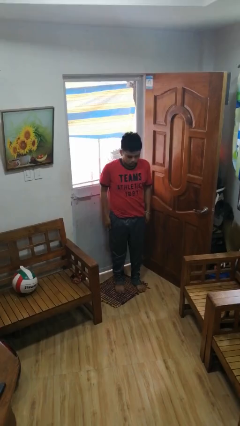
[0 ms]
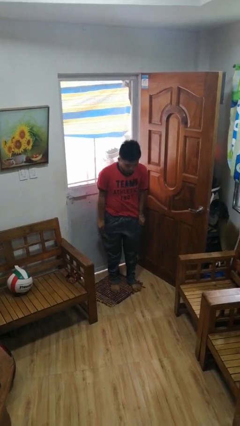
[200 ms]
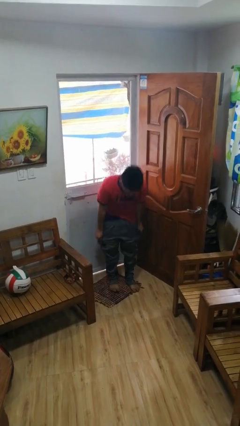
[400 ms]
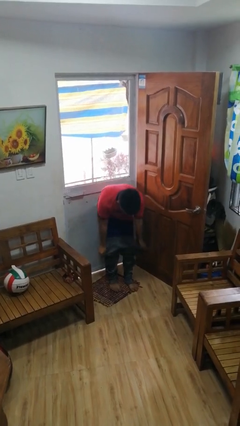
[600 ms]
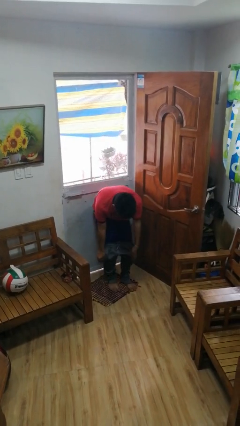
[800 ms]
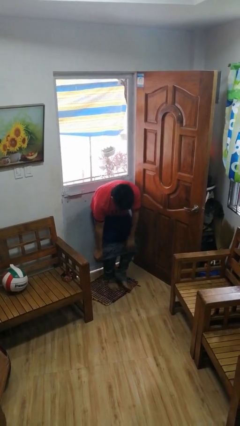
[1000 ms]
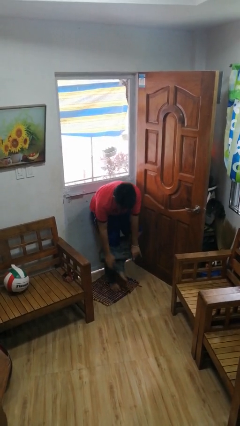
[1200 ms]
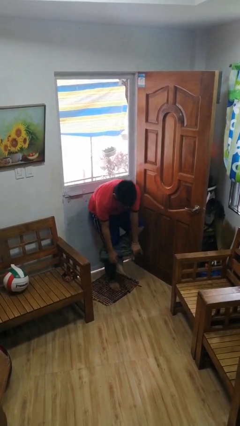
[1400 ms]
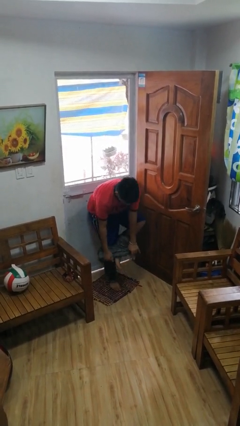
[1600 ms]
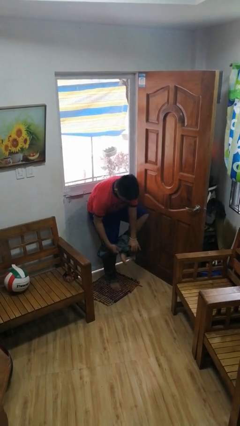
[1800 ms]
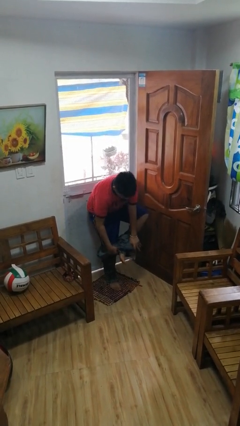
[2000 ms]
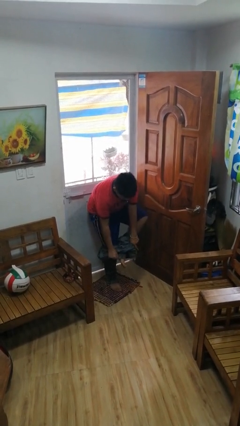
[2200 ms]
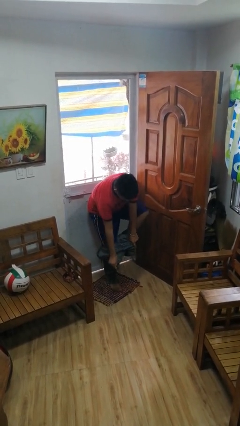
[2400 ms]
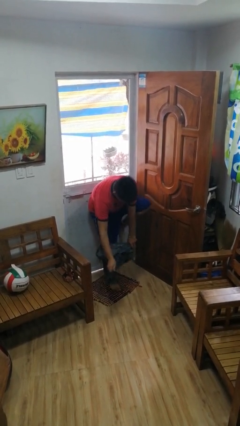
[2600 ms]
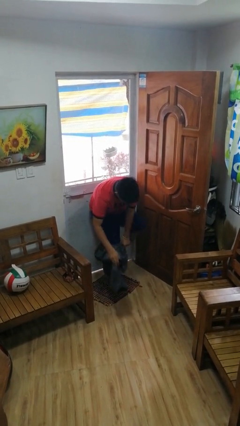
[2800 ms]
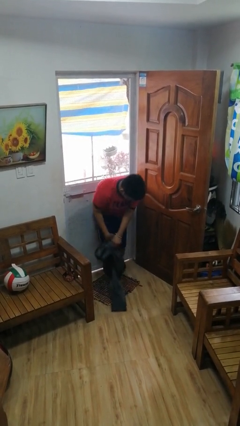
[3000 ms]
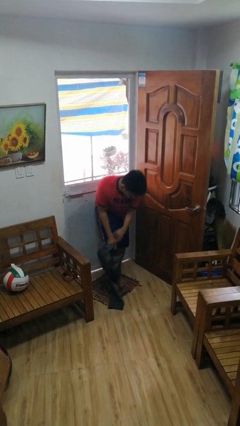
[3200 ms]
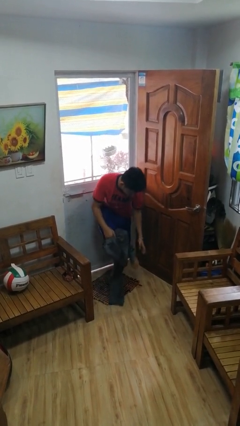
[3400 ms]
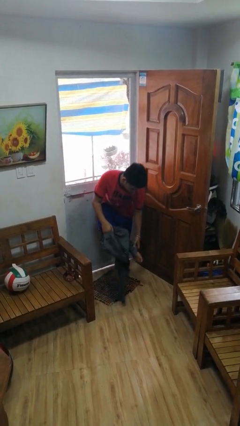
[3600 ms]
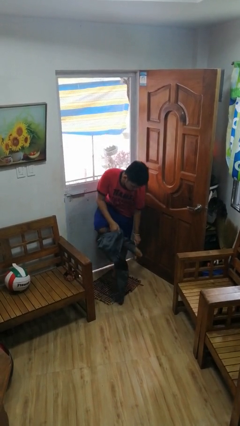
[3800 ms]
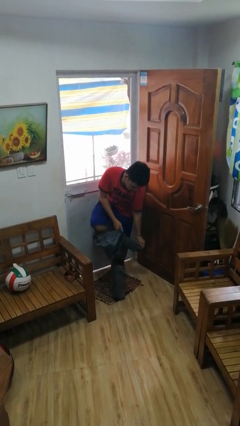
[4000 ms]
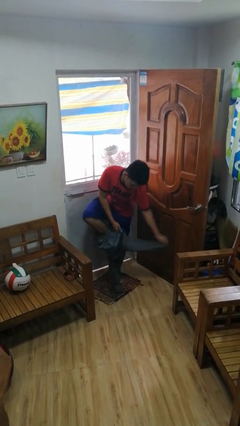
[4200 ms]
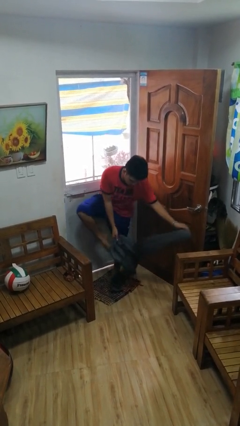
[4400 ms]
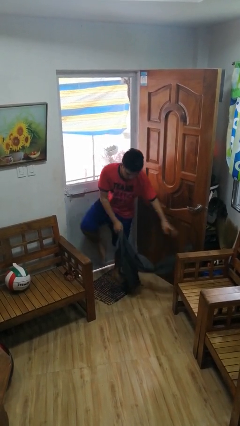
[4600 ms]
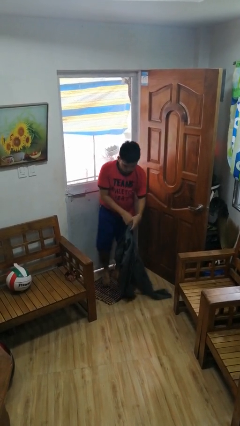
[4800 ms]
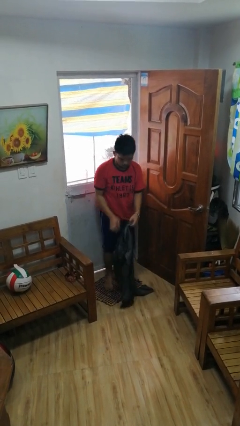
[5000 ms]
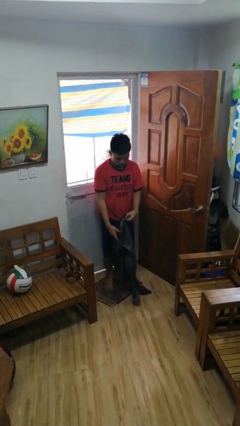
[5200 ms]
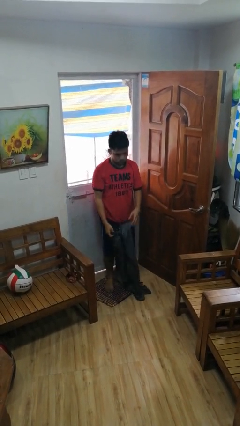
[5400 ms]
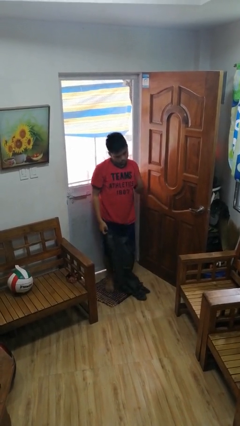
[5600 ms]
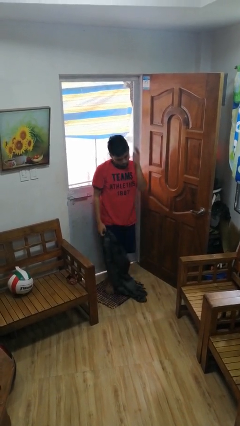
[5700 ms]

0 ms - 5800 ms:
person takes off pants

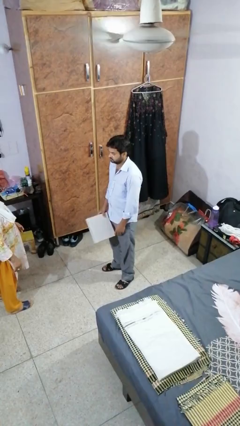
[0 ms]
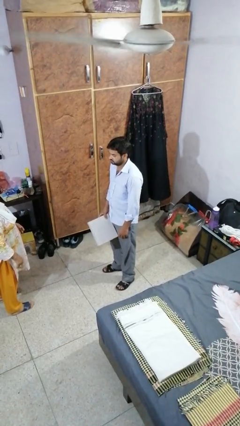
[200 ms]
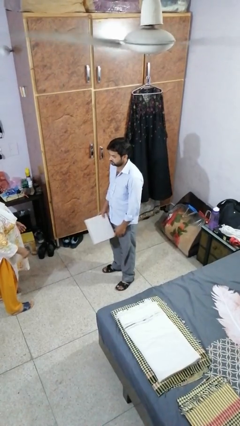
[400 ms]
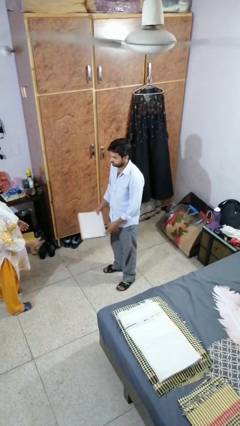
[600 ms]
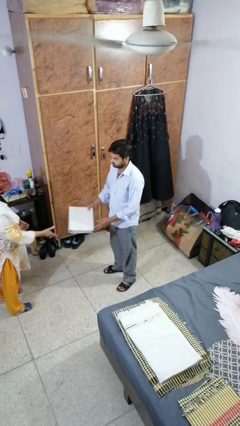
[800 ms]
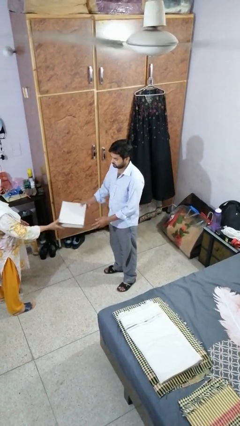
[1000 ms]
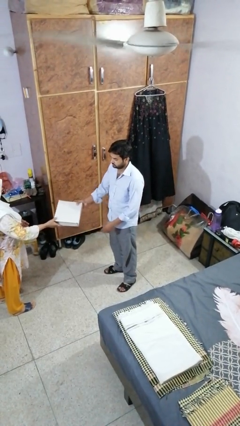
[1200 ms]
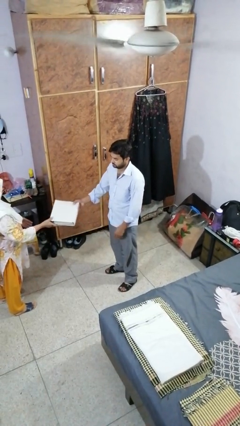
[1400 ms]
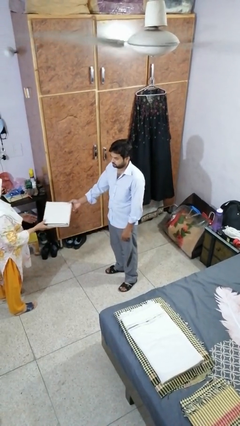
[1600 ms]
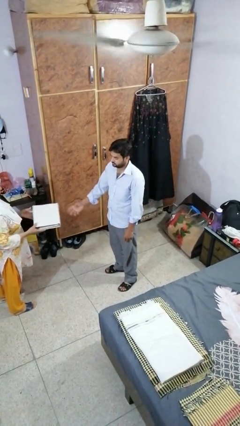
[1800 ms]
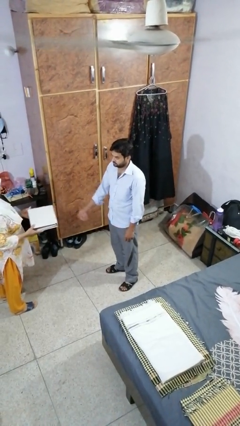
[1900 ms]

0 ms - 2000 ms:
person transfers object to person

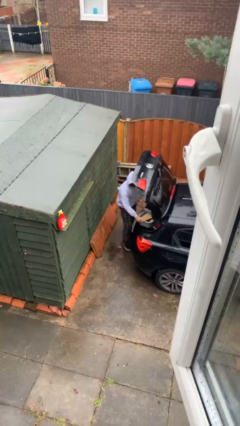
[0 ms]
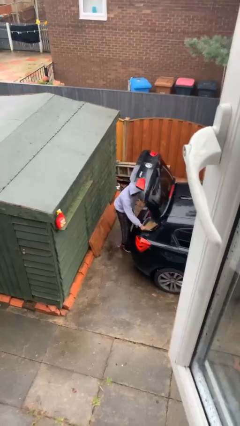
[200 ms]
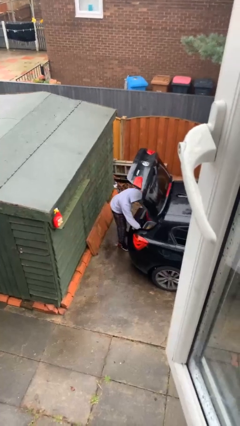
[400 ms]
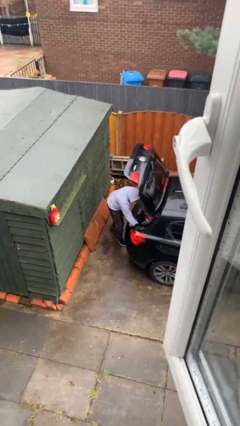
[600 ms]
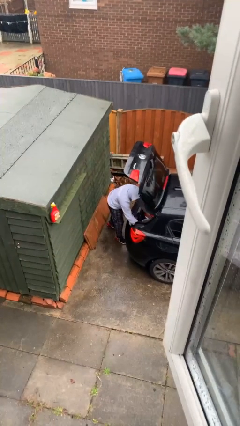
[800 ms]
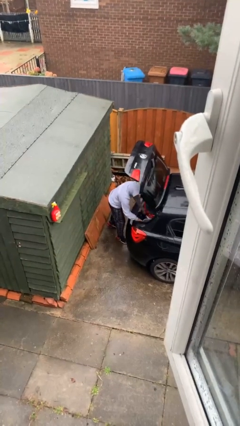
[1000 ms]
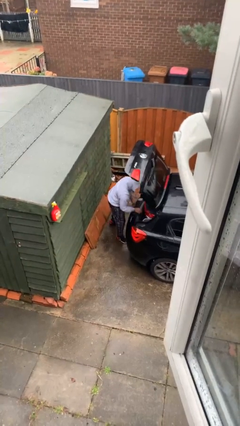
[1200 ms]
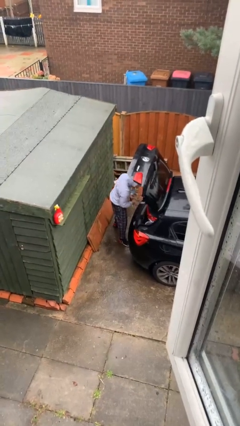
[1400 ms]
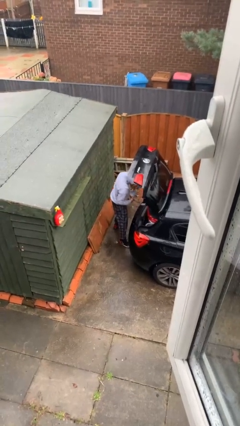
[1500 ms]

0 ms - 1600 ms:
person loads car

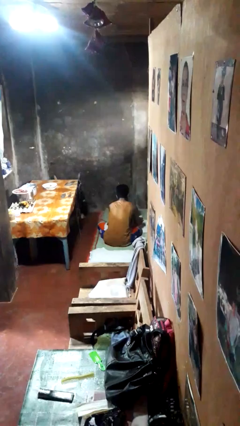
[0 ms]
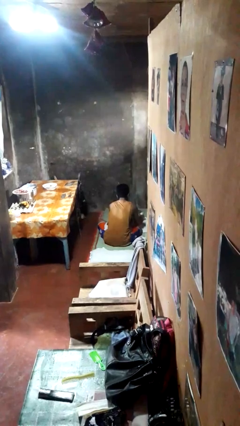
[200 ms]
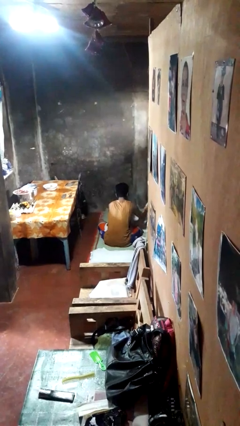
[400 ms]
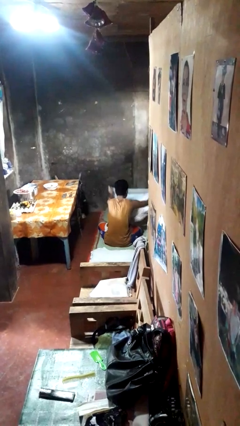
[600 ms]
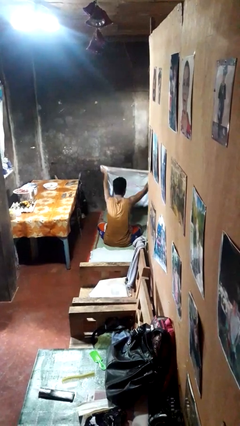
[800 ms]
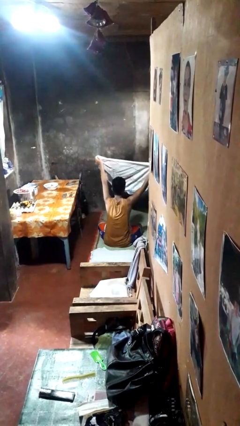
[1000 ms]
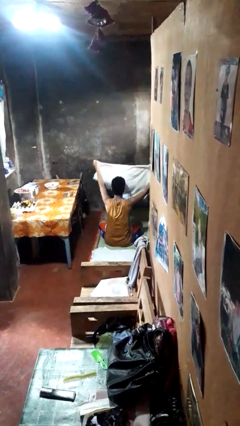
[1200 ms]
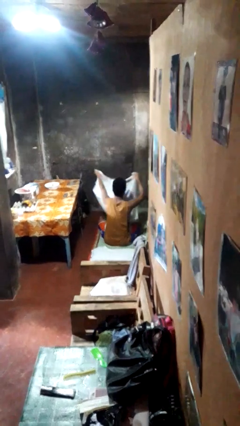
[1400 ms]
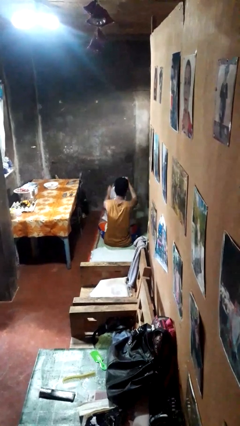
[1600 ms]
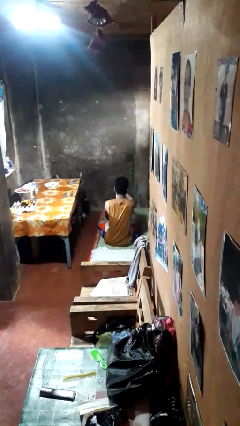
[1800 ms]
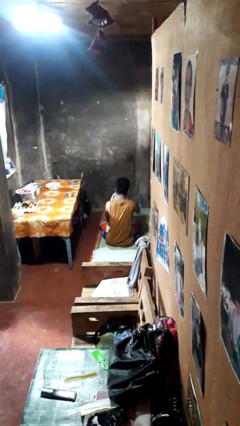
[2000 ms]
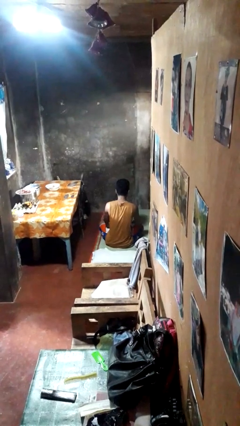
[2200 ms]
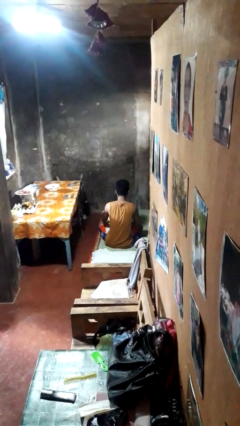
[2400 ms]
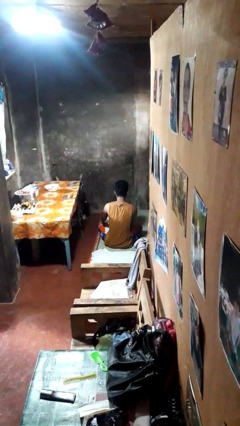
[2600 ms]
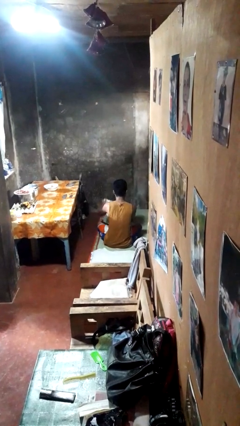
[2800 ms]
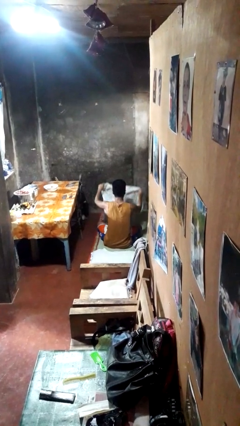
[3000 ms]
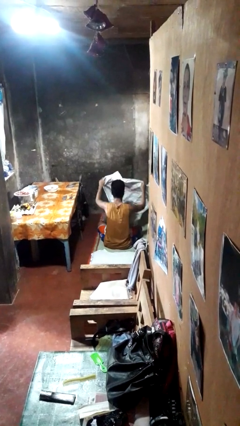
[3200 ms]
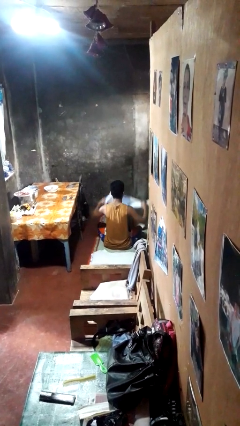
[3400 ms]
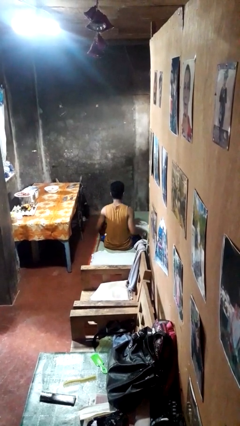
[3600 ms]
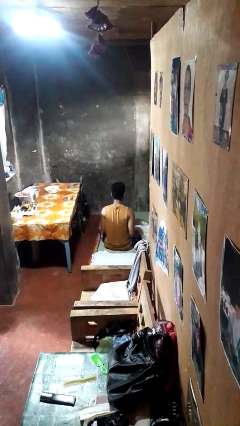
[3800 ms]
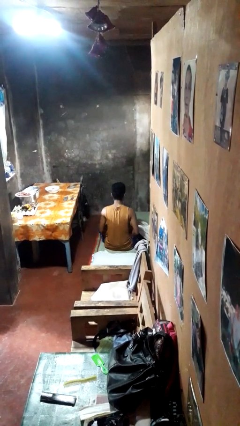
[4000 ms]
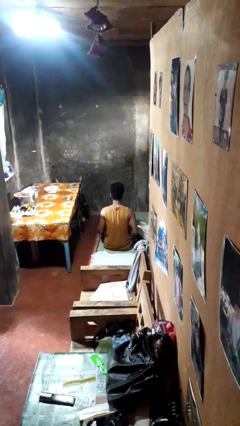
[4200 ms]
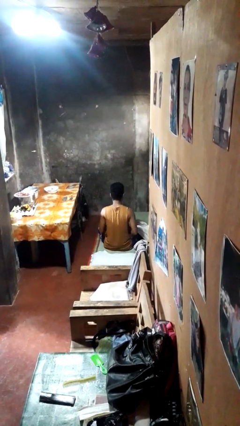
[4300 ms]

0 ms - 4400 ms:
person unfolds blanket

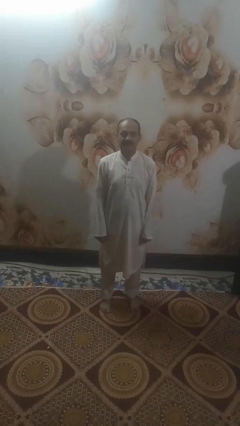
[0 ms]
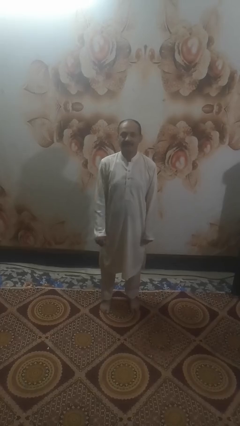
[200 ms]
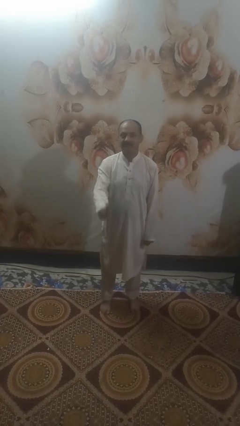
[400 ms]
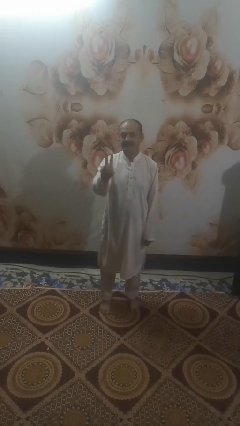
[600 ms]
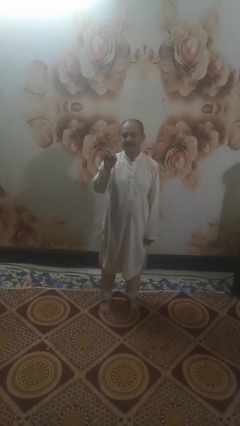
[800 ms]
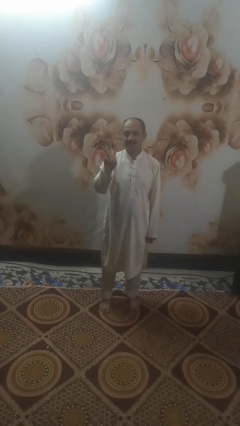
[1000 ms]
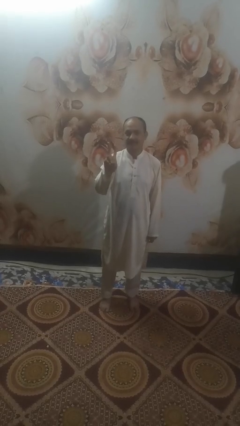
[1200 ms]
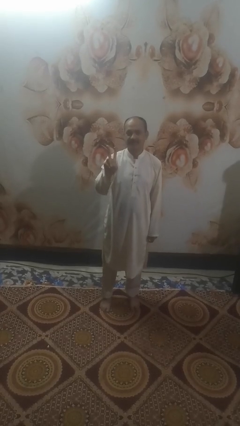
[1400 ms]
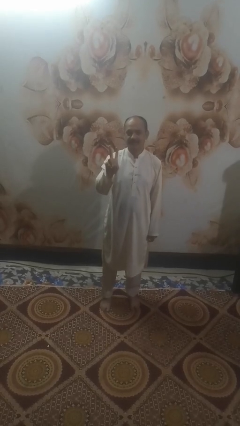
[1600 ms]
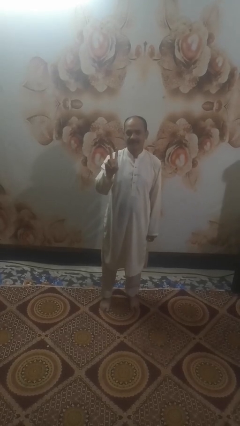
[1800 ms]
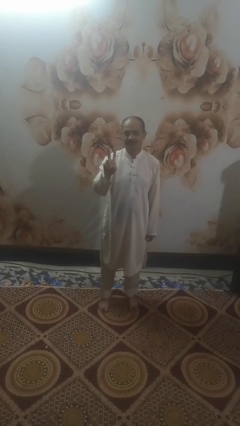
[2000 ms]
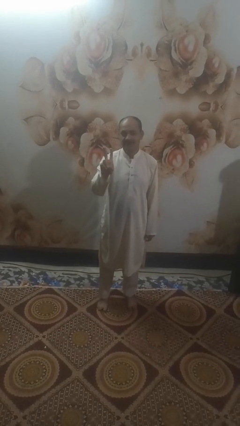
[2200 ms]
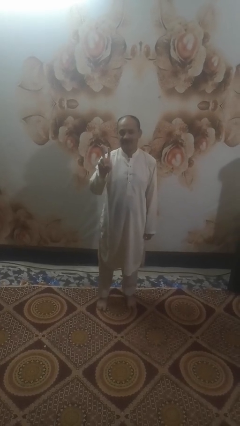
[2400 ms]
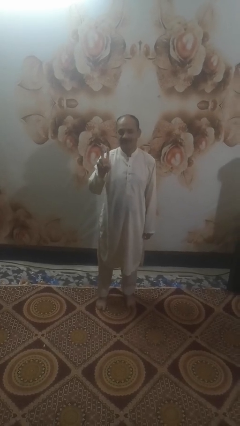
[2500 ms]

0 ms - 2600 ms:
person gestures peace

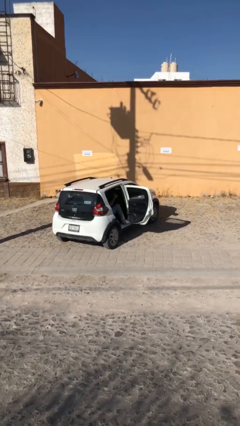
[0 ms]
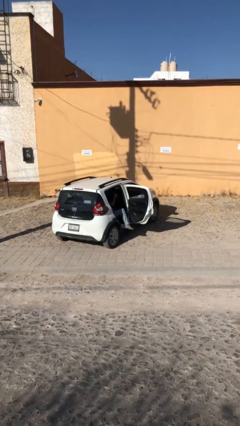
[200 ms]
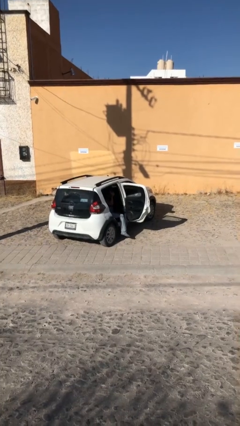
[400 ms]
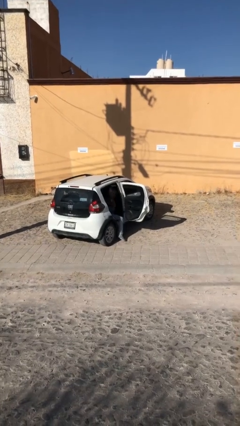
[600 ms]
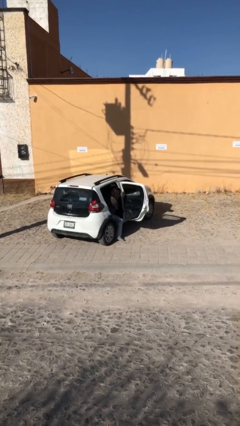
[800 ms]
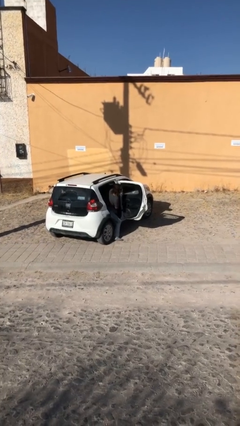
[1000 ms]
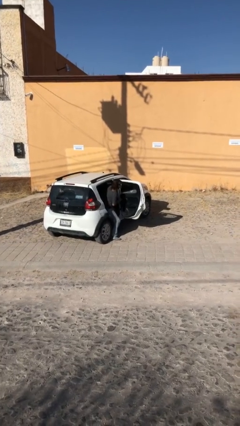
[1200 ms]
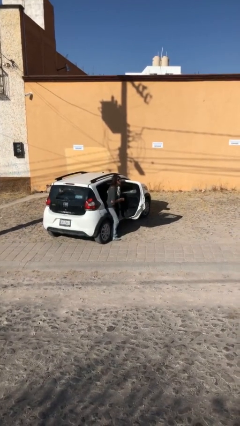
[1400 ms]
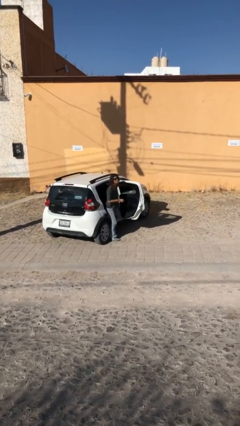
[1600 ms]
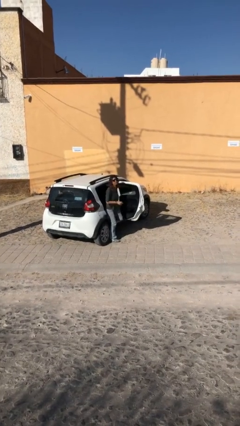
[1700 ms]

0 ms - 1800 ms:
person exits car
